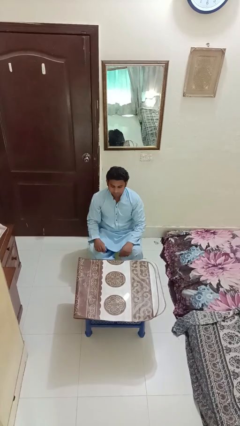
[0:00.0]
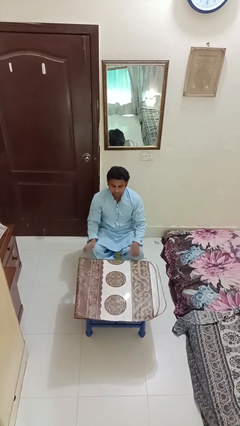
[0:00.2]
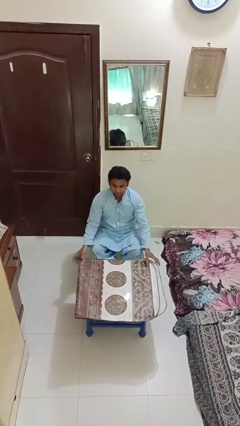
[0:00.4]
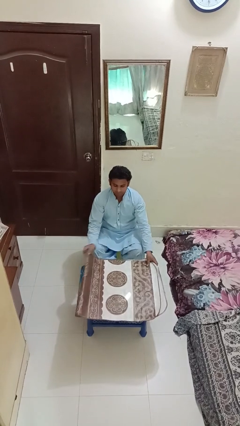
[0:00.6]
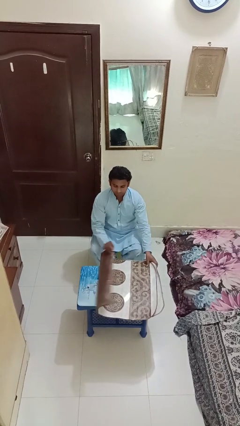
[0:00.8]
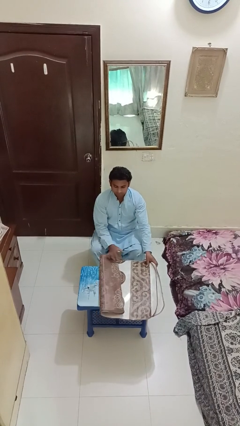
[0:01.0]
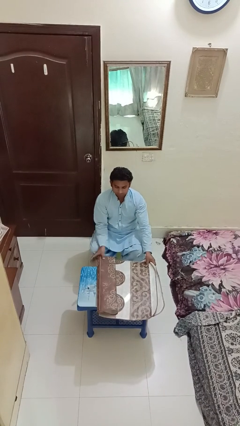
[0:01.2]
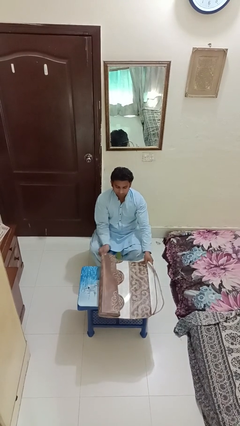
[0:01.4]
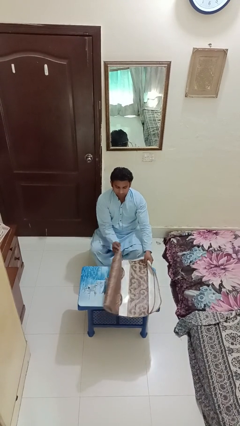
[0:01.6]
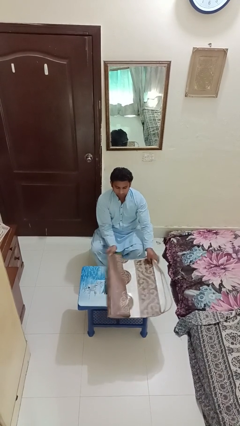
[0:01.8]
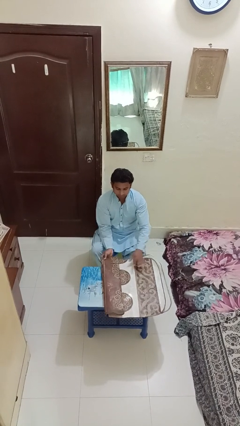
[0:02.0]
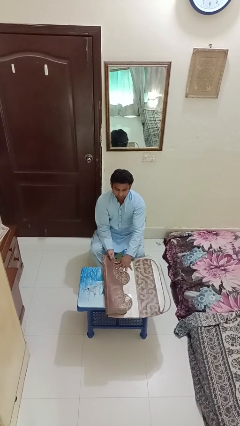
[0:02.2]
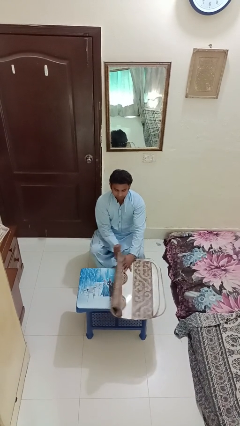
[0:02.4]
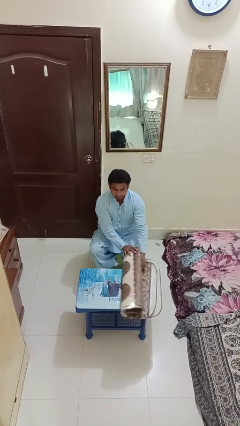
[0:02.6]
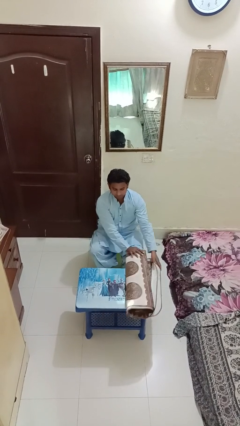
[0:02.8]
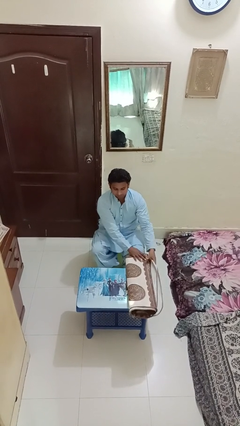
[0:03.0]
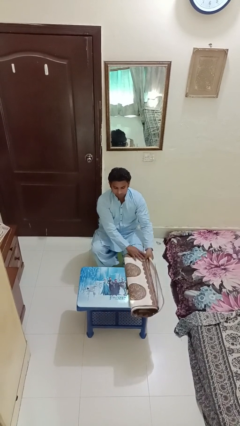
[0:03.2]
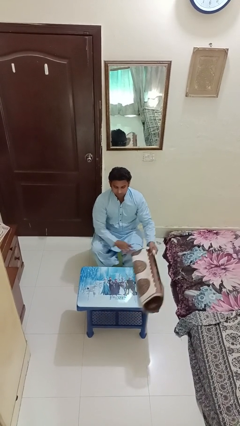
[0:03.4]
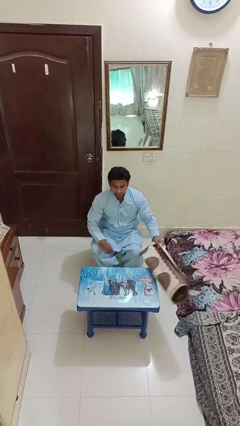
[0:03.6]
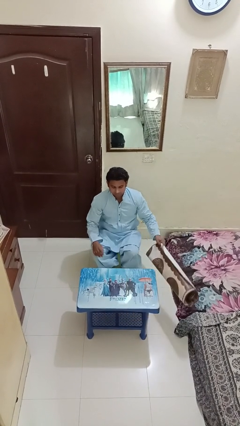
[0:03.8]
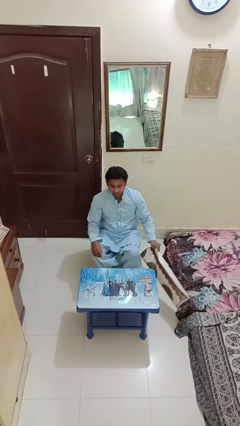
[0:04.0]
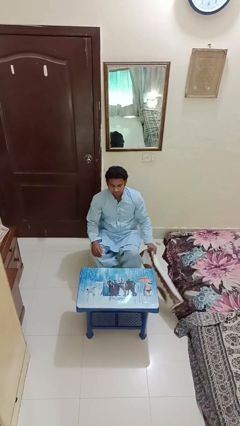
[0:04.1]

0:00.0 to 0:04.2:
person folds tablecloth

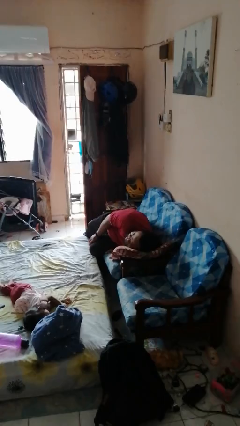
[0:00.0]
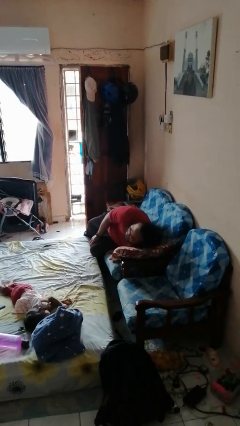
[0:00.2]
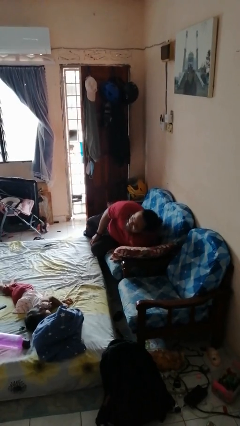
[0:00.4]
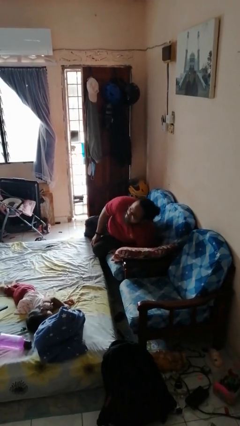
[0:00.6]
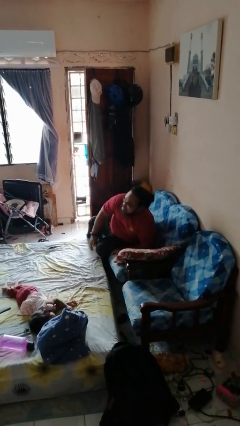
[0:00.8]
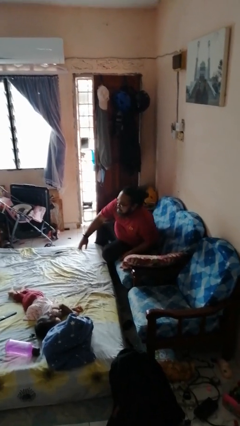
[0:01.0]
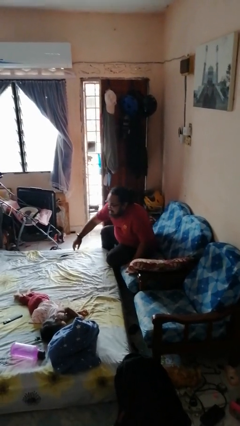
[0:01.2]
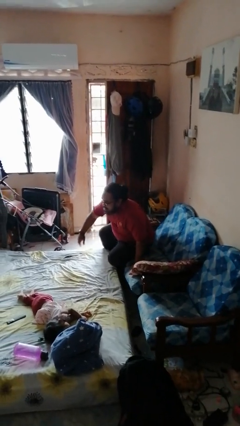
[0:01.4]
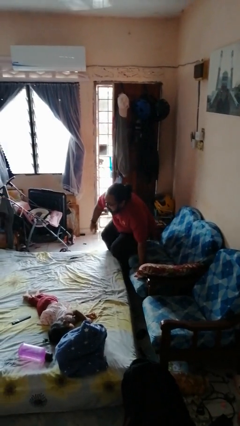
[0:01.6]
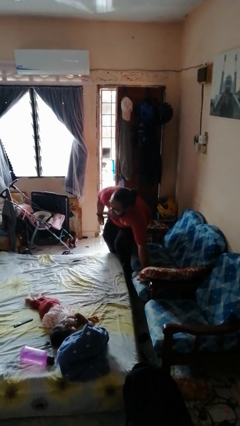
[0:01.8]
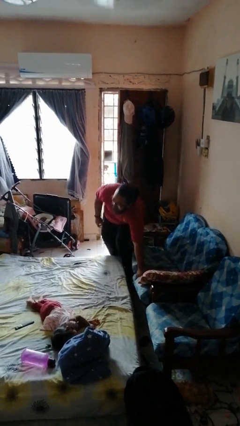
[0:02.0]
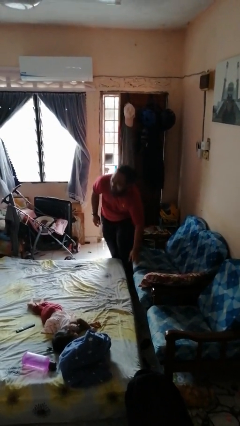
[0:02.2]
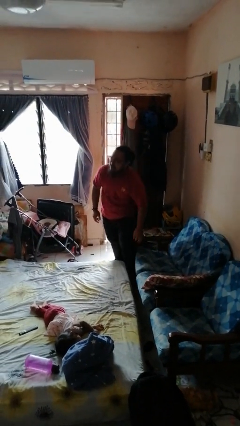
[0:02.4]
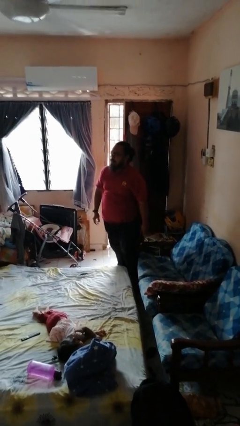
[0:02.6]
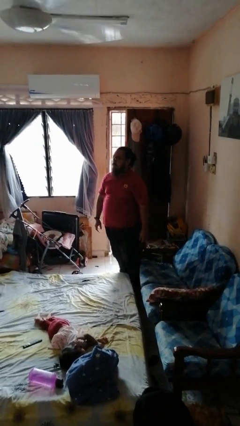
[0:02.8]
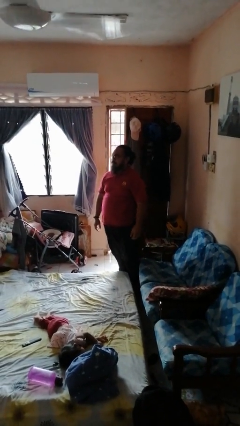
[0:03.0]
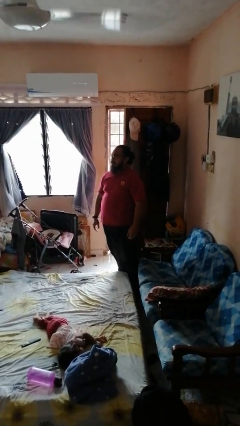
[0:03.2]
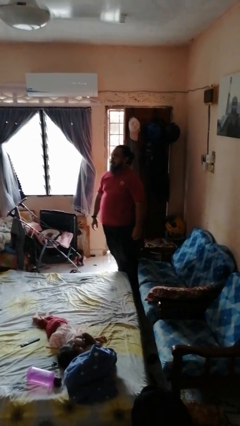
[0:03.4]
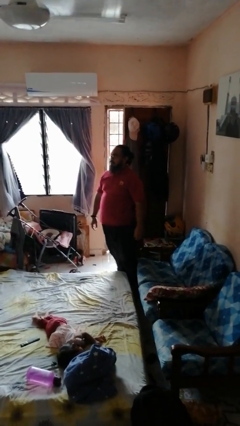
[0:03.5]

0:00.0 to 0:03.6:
person stands up

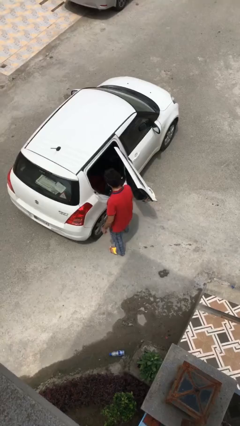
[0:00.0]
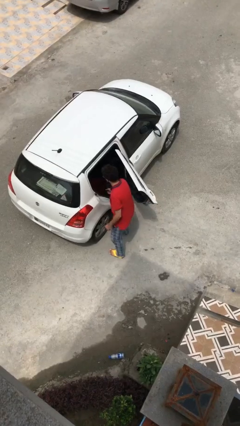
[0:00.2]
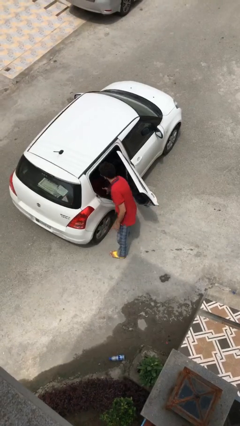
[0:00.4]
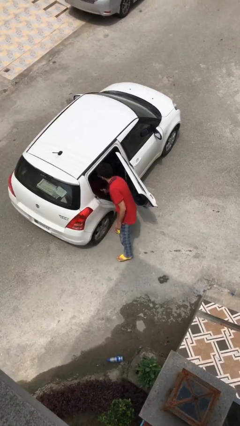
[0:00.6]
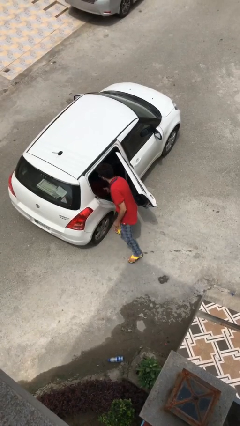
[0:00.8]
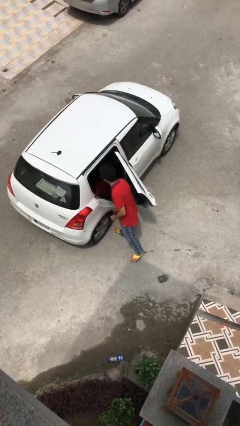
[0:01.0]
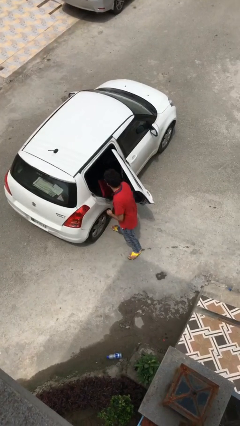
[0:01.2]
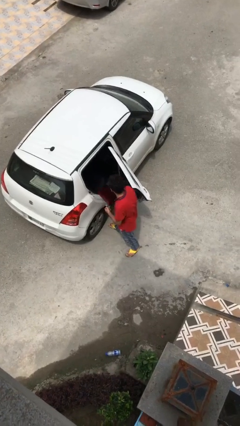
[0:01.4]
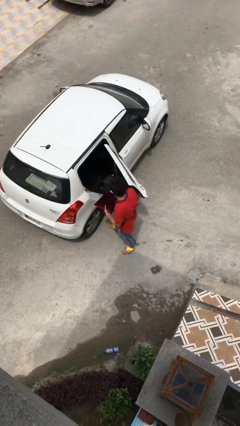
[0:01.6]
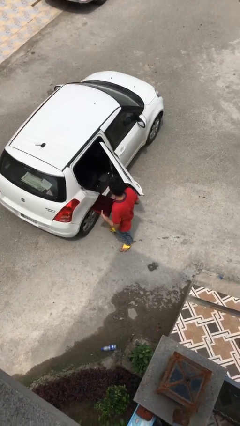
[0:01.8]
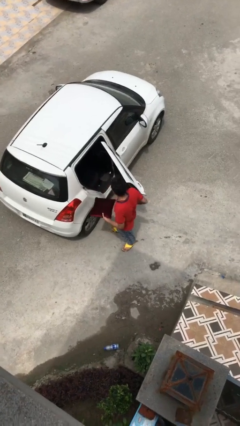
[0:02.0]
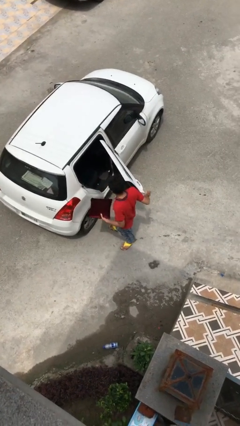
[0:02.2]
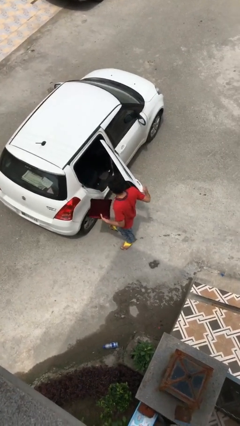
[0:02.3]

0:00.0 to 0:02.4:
person unloads car

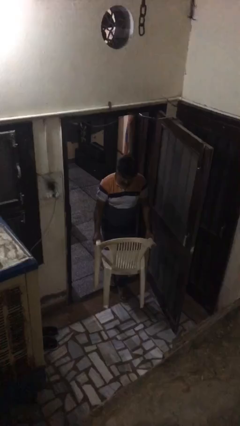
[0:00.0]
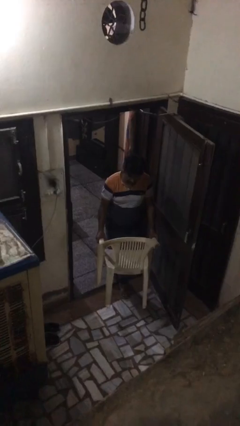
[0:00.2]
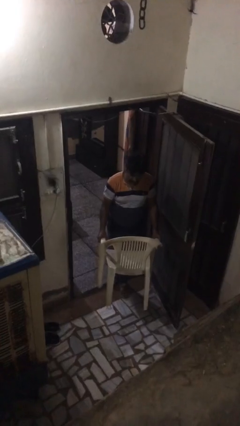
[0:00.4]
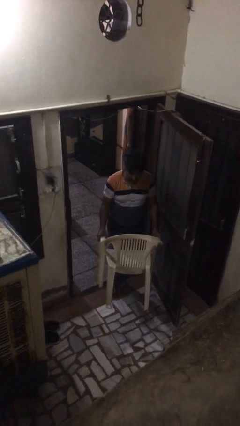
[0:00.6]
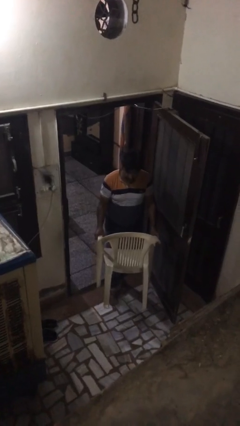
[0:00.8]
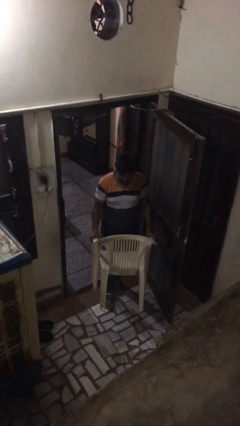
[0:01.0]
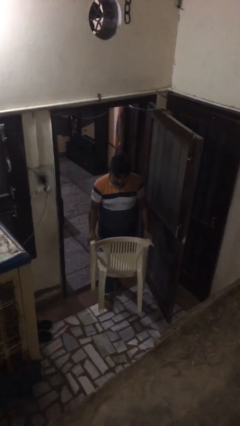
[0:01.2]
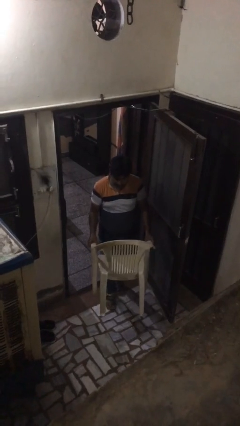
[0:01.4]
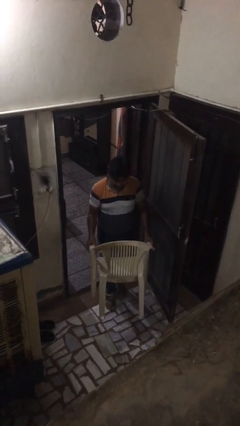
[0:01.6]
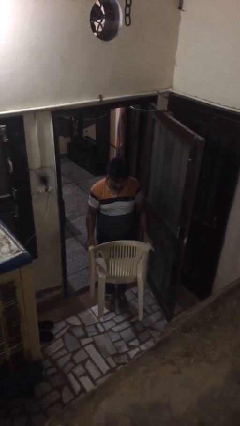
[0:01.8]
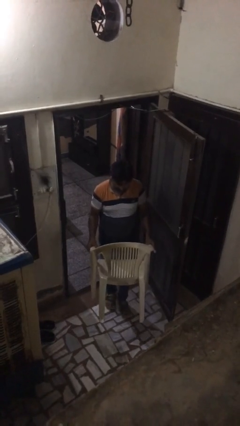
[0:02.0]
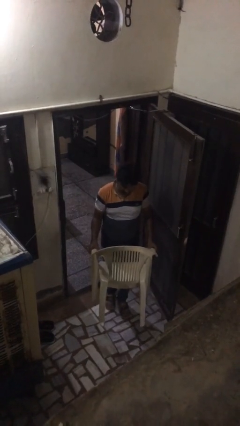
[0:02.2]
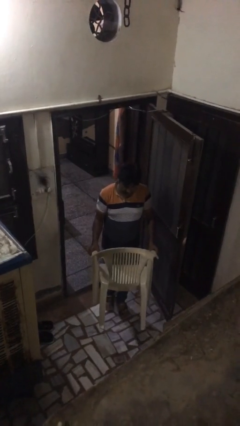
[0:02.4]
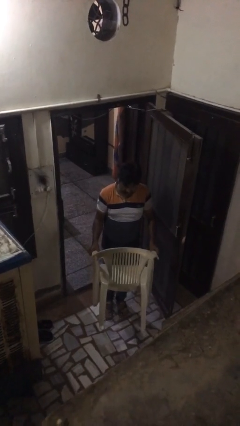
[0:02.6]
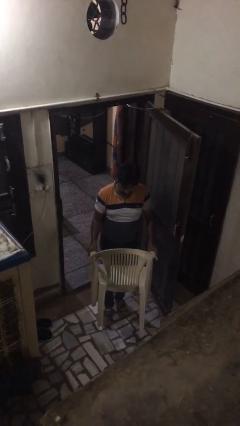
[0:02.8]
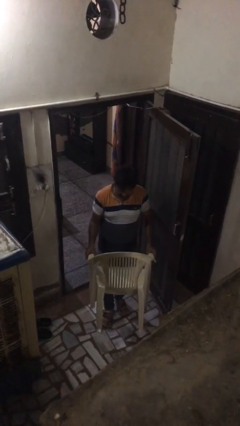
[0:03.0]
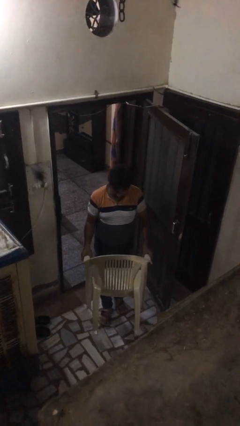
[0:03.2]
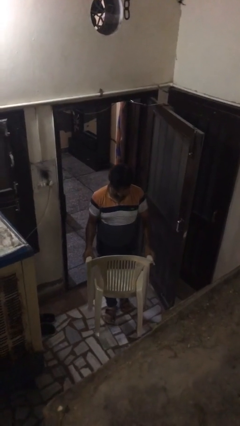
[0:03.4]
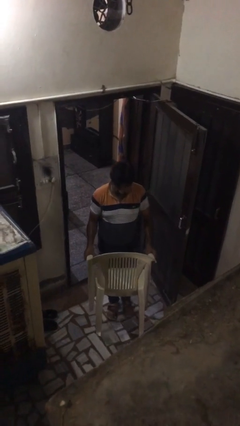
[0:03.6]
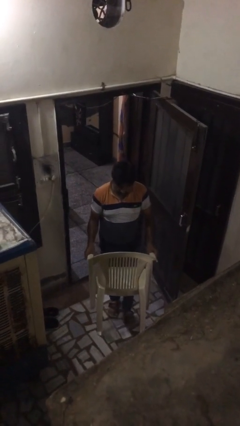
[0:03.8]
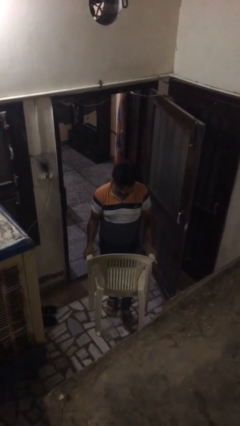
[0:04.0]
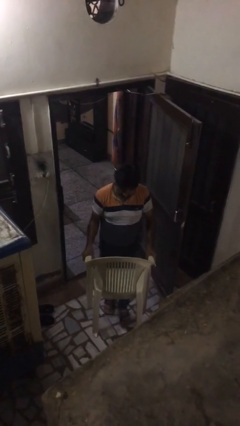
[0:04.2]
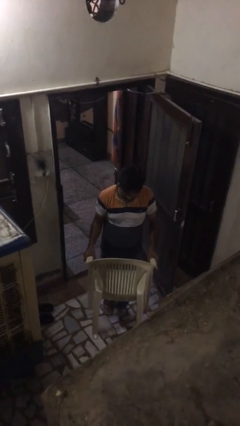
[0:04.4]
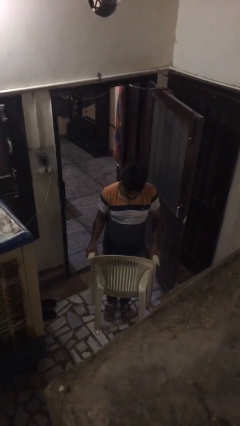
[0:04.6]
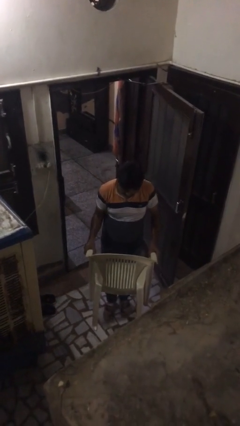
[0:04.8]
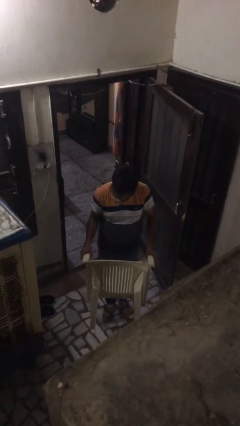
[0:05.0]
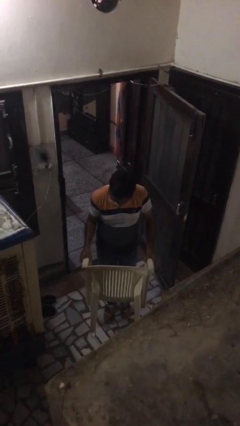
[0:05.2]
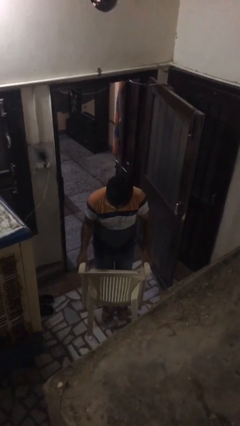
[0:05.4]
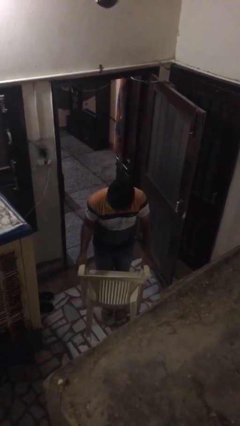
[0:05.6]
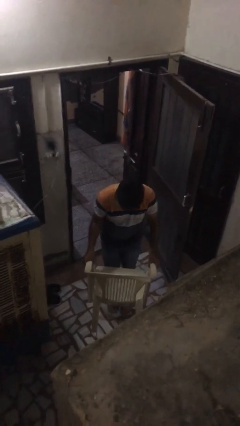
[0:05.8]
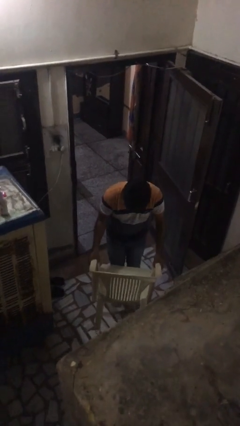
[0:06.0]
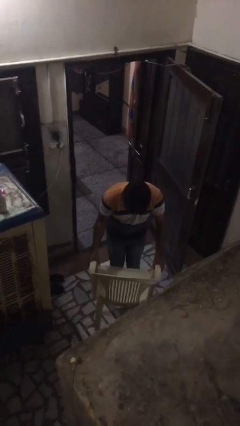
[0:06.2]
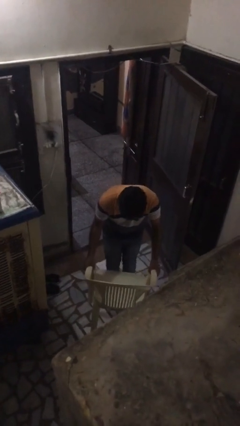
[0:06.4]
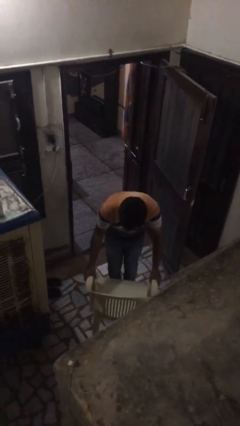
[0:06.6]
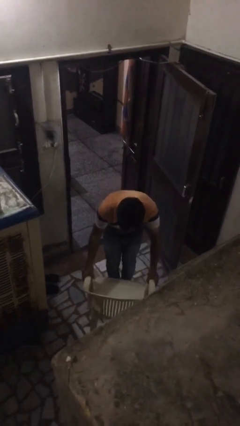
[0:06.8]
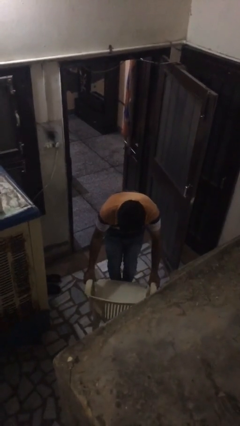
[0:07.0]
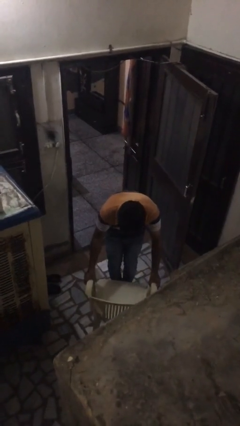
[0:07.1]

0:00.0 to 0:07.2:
person carries heavy object

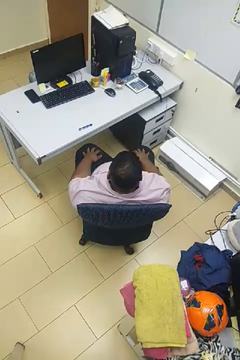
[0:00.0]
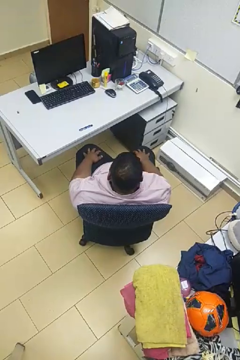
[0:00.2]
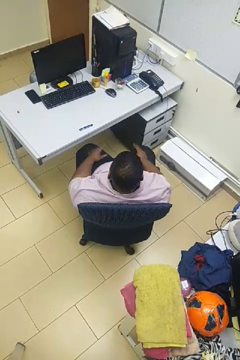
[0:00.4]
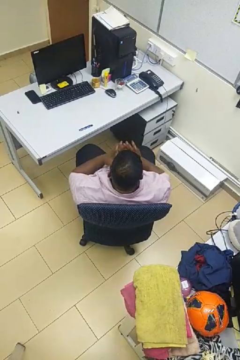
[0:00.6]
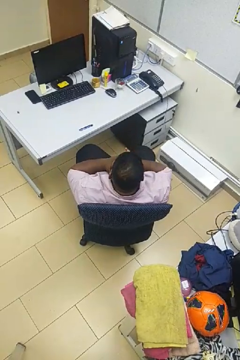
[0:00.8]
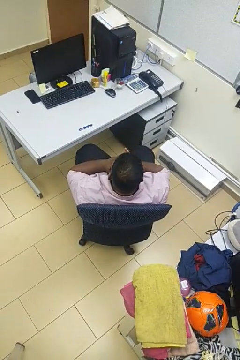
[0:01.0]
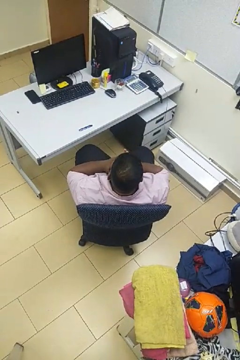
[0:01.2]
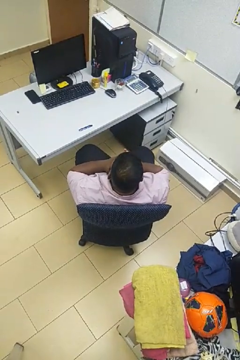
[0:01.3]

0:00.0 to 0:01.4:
person covers face with hands
